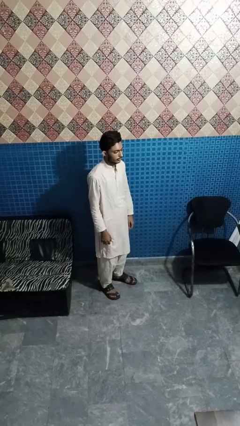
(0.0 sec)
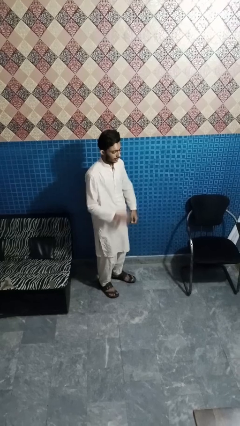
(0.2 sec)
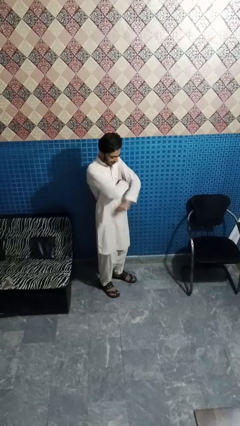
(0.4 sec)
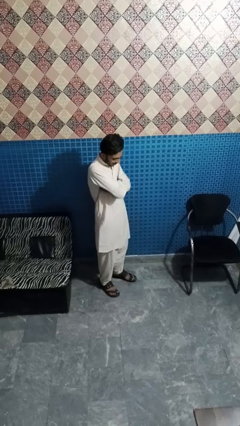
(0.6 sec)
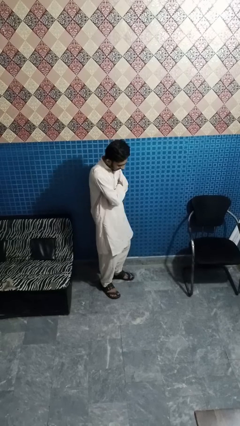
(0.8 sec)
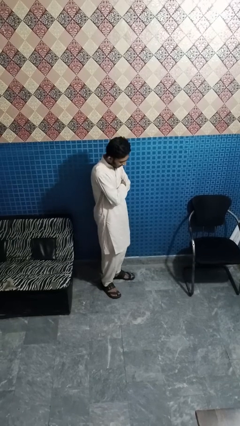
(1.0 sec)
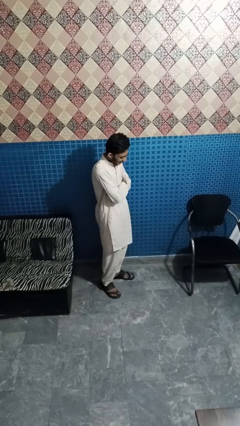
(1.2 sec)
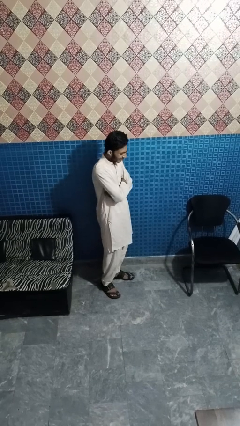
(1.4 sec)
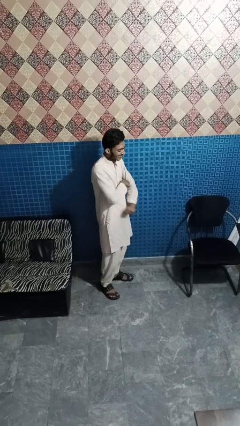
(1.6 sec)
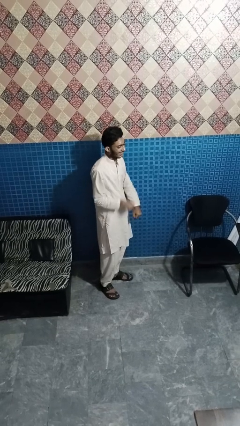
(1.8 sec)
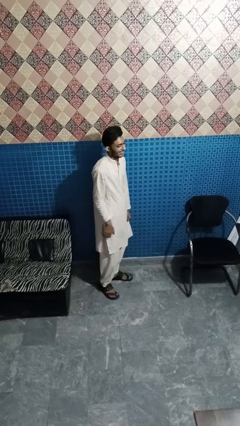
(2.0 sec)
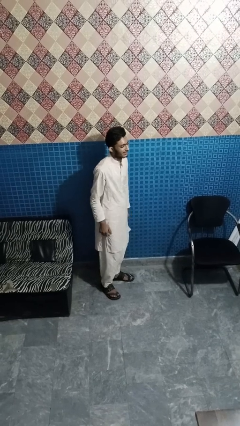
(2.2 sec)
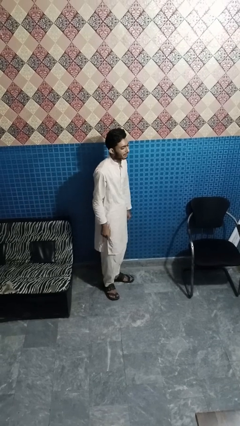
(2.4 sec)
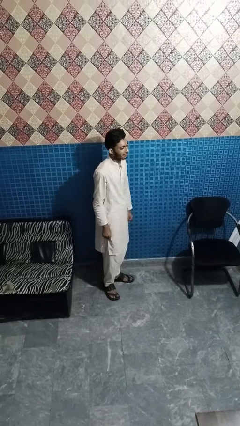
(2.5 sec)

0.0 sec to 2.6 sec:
person crosses arms

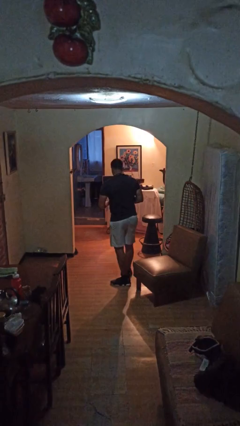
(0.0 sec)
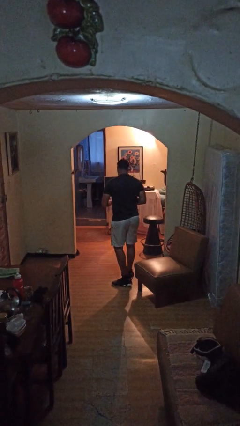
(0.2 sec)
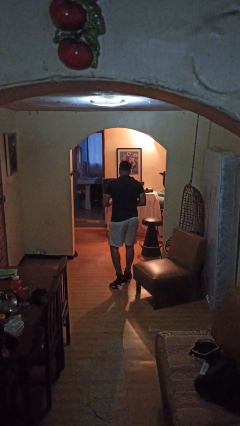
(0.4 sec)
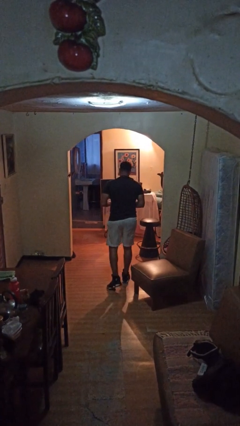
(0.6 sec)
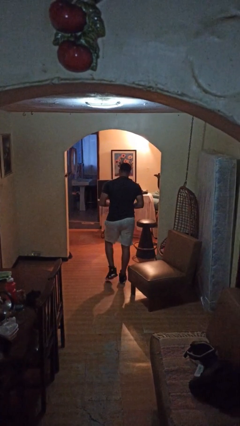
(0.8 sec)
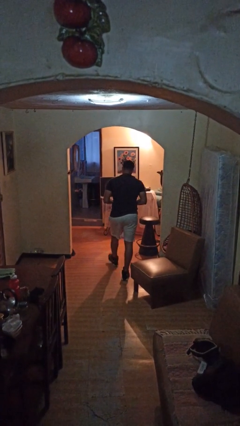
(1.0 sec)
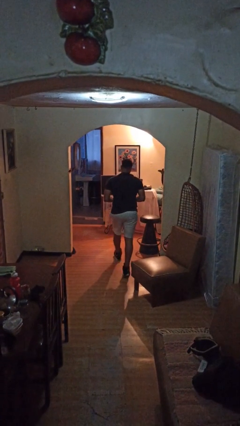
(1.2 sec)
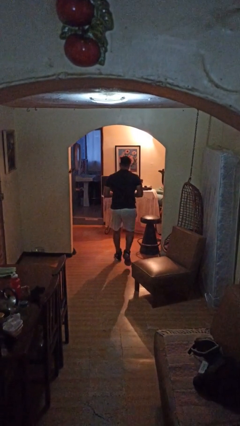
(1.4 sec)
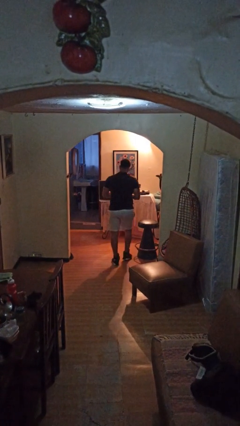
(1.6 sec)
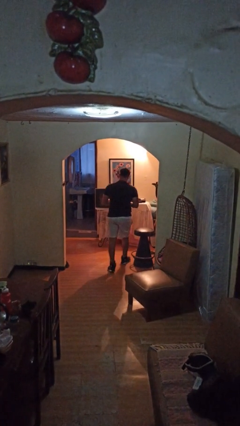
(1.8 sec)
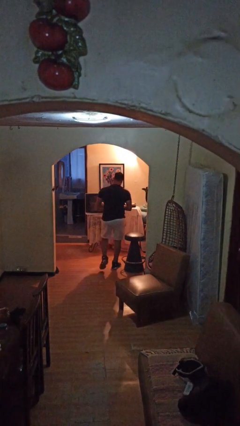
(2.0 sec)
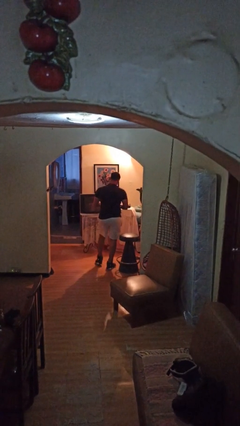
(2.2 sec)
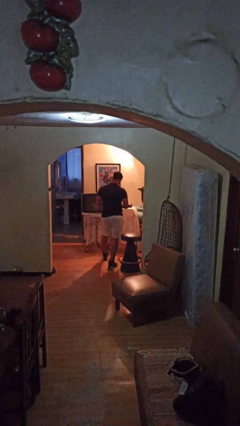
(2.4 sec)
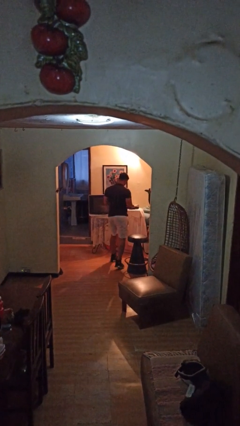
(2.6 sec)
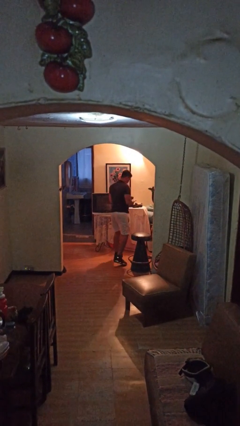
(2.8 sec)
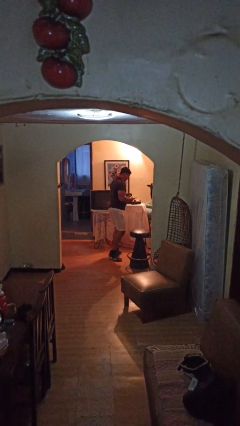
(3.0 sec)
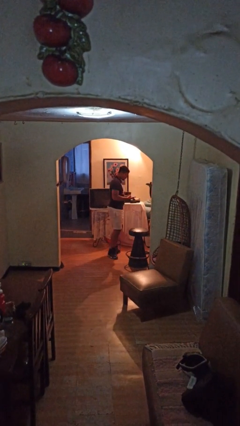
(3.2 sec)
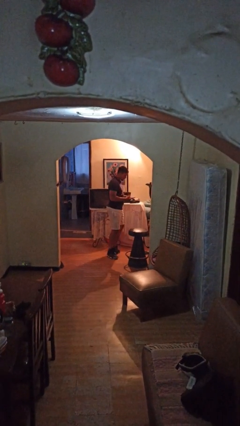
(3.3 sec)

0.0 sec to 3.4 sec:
person exits scene through structure

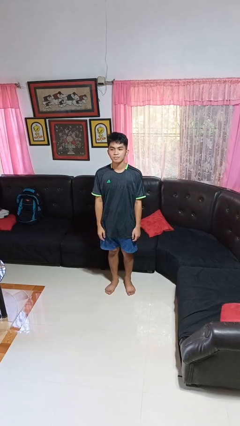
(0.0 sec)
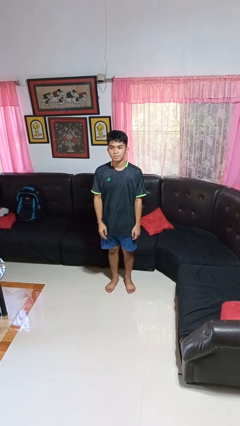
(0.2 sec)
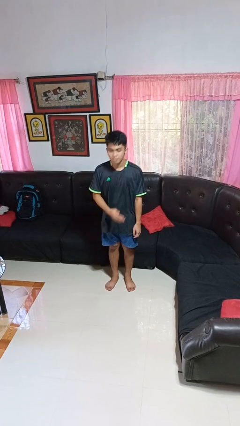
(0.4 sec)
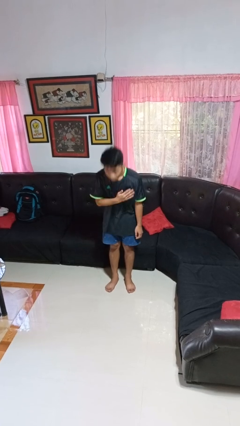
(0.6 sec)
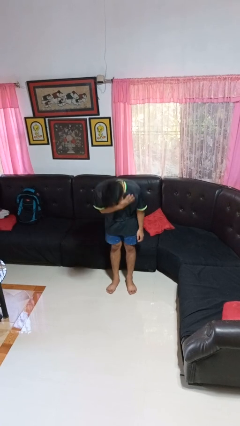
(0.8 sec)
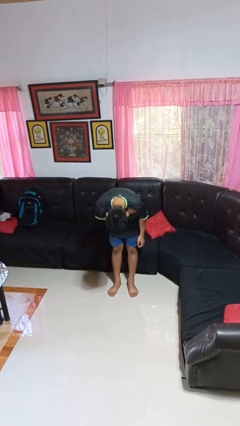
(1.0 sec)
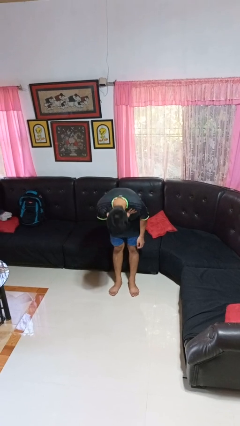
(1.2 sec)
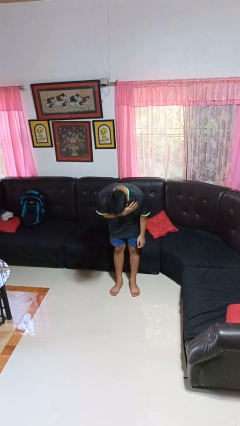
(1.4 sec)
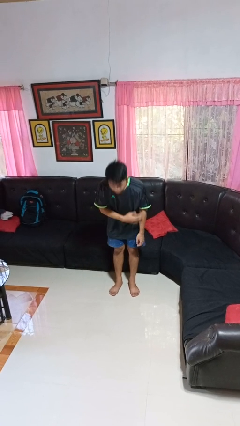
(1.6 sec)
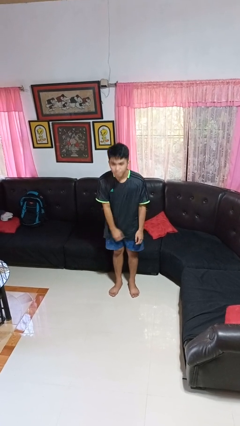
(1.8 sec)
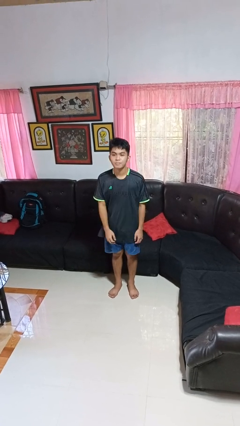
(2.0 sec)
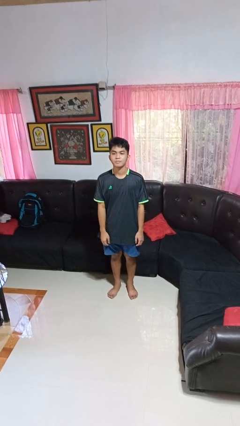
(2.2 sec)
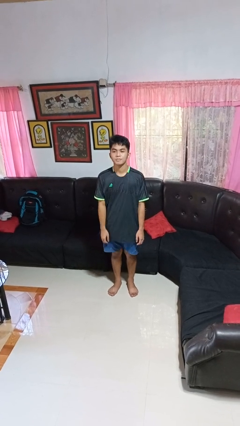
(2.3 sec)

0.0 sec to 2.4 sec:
person bows

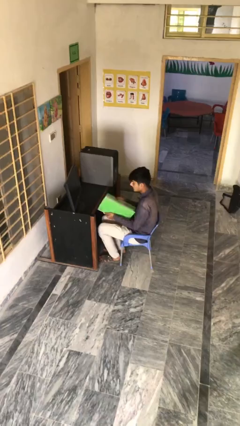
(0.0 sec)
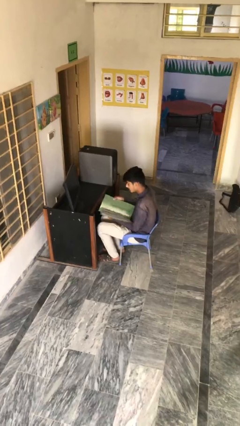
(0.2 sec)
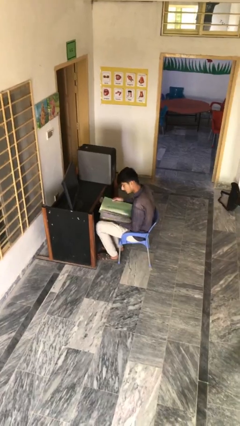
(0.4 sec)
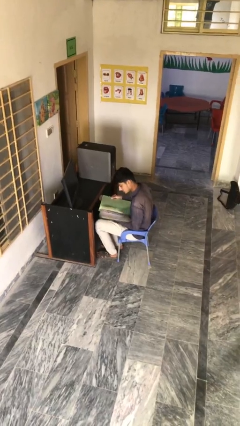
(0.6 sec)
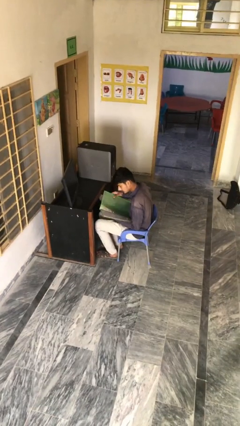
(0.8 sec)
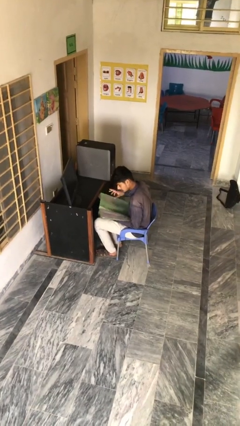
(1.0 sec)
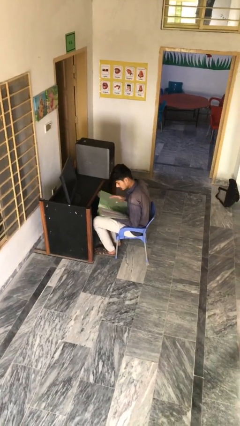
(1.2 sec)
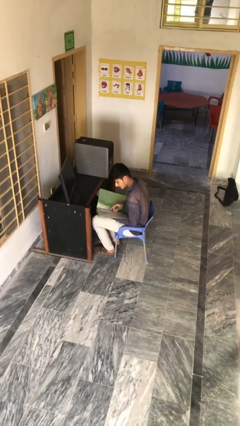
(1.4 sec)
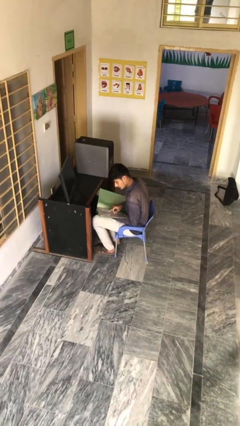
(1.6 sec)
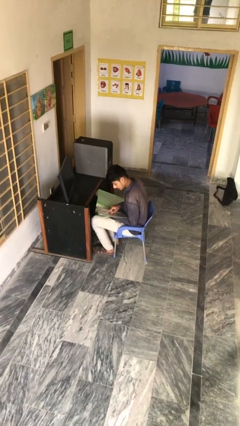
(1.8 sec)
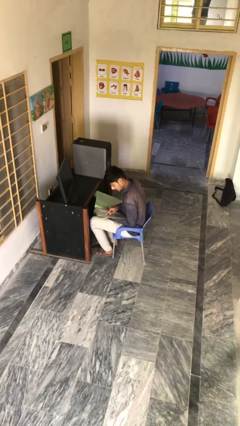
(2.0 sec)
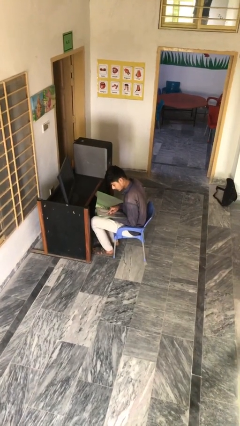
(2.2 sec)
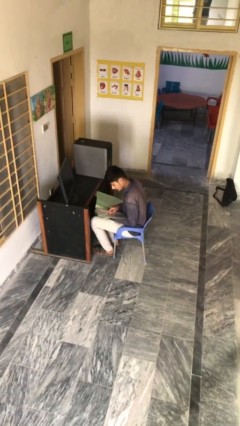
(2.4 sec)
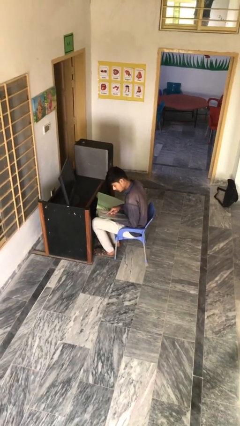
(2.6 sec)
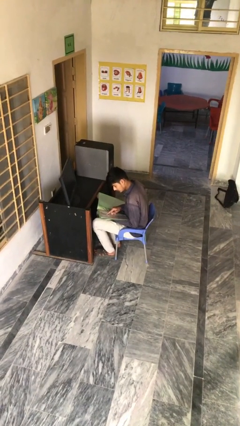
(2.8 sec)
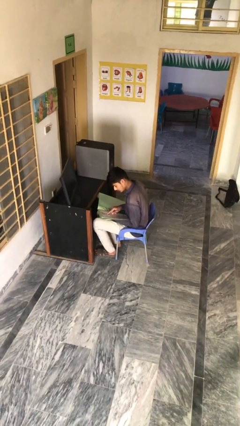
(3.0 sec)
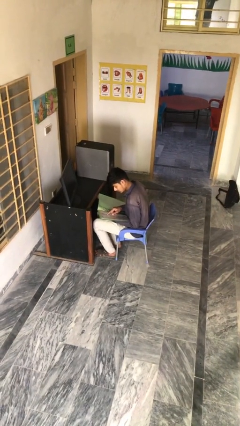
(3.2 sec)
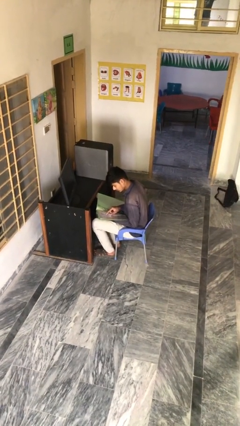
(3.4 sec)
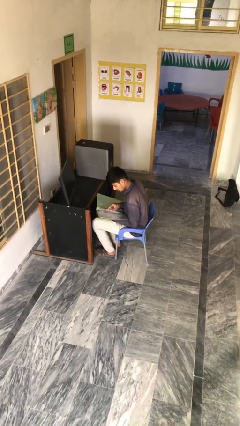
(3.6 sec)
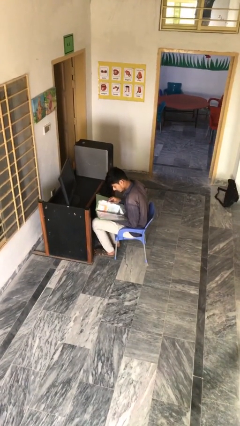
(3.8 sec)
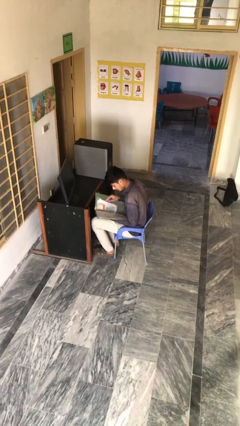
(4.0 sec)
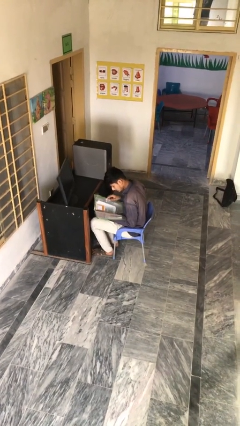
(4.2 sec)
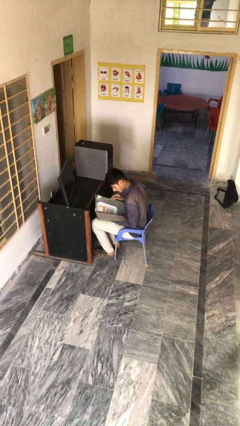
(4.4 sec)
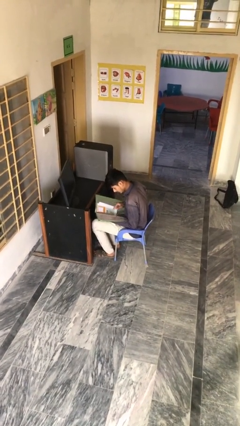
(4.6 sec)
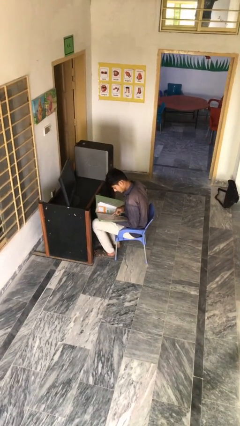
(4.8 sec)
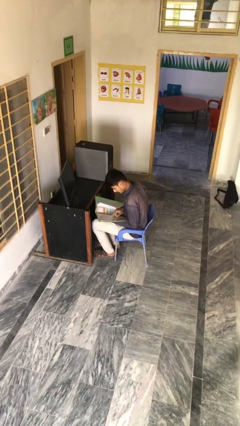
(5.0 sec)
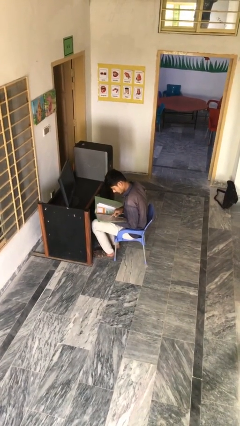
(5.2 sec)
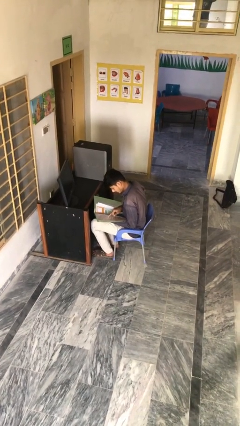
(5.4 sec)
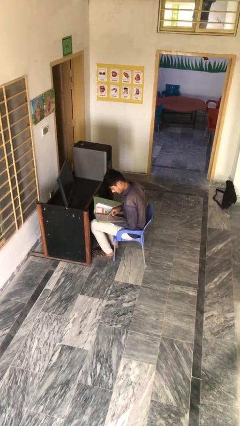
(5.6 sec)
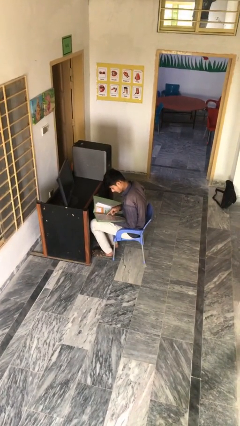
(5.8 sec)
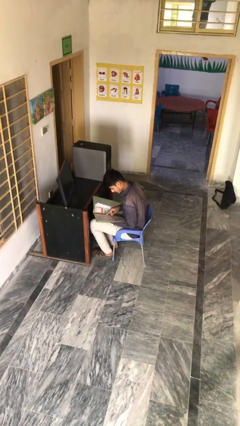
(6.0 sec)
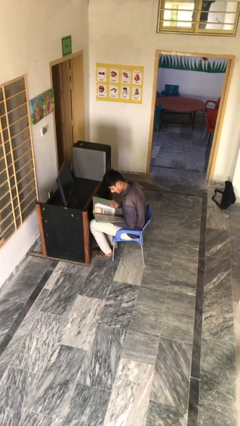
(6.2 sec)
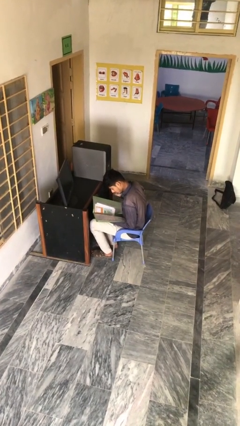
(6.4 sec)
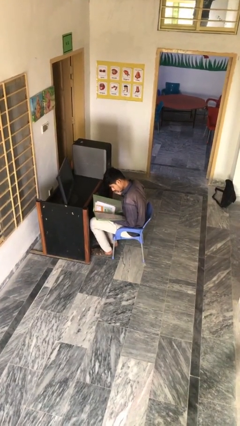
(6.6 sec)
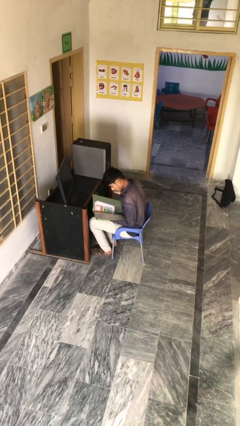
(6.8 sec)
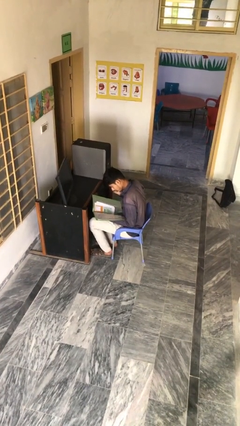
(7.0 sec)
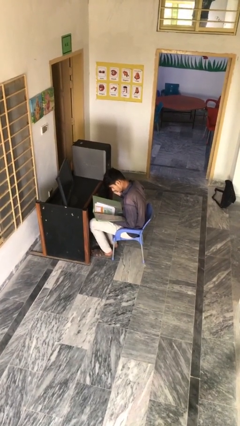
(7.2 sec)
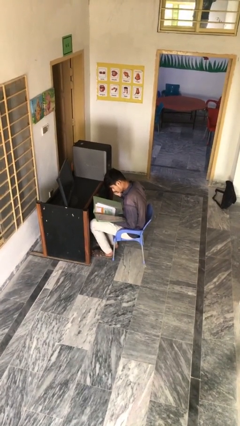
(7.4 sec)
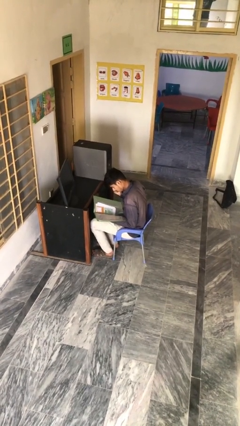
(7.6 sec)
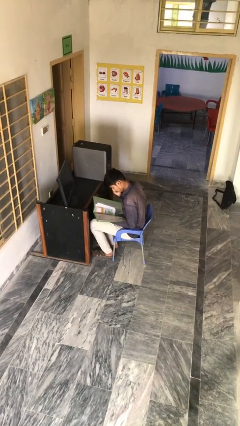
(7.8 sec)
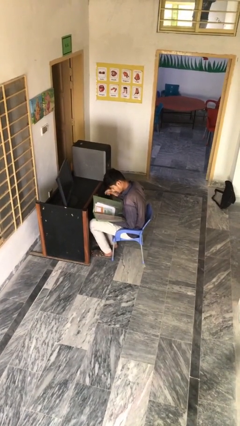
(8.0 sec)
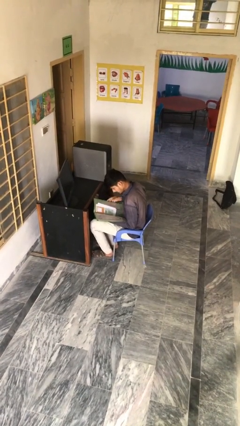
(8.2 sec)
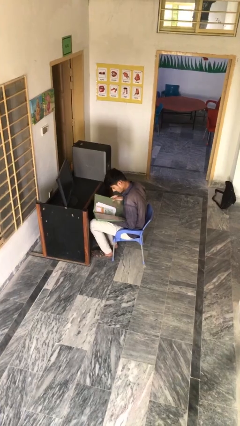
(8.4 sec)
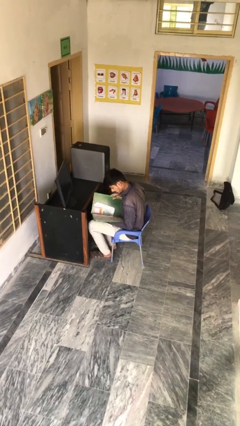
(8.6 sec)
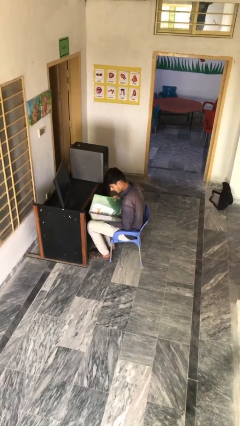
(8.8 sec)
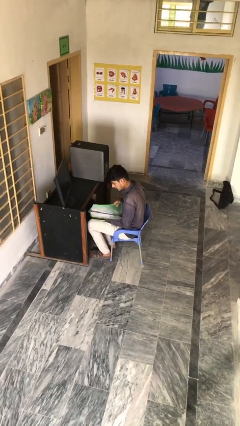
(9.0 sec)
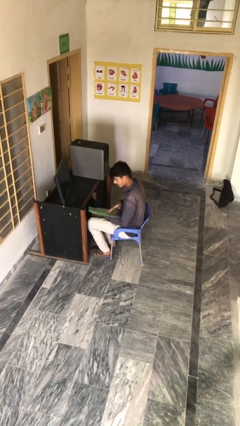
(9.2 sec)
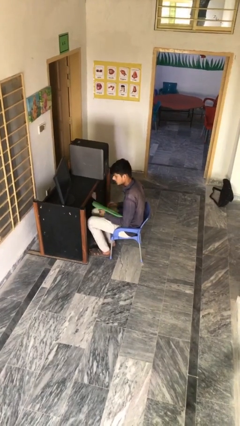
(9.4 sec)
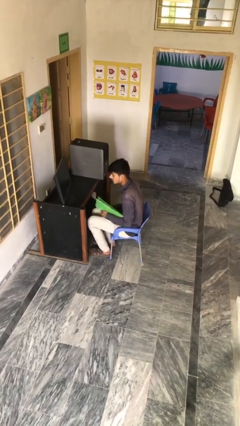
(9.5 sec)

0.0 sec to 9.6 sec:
person reads document
